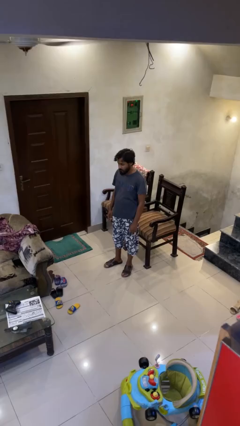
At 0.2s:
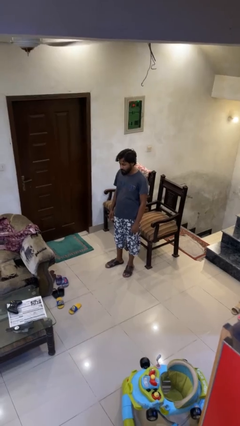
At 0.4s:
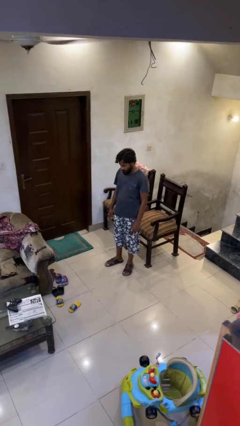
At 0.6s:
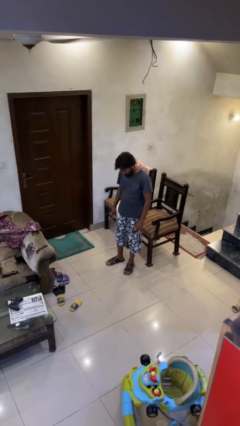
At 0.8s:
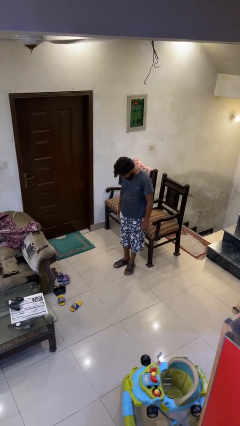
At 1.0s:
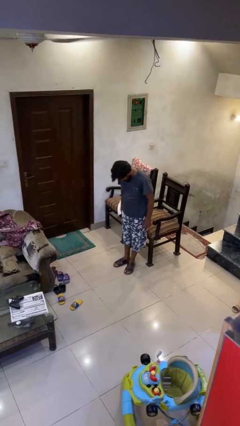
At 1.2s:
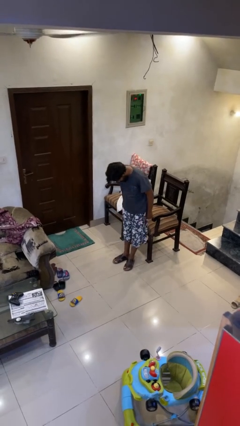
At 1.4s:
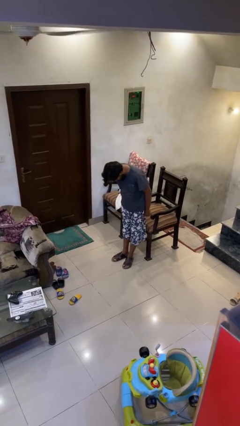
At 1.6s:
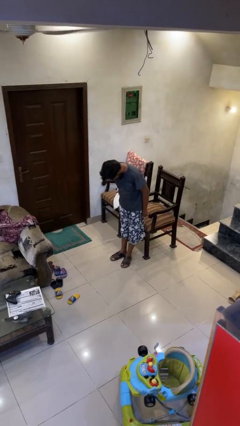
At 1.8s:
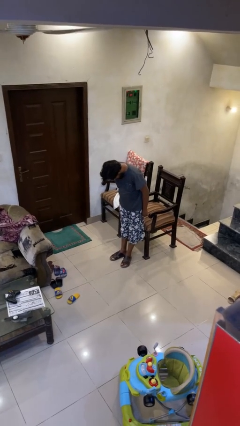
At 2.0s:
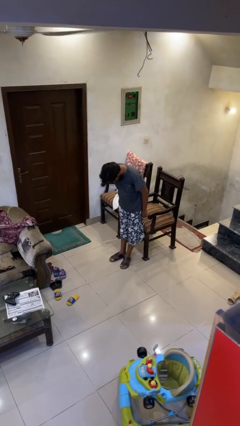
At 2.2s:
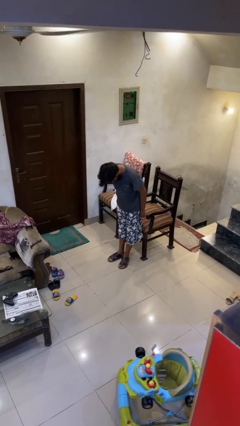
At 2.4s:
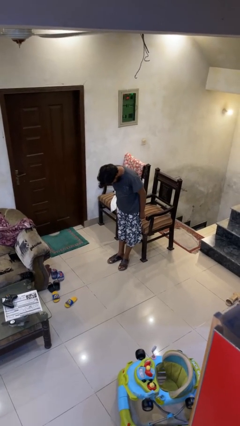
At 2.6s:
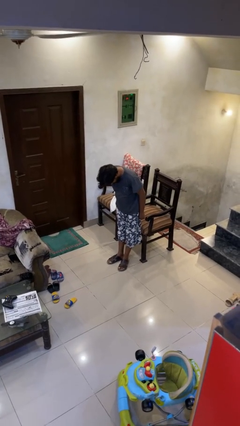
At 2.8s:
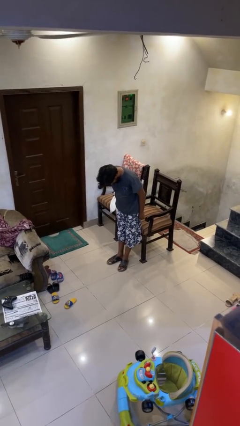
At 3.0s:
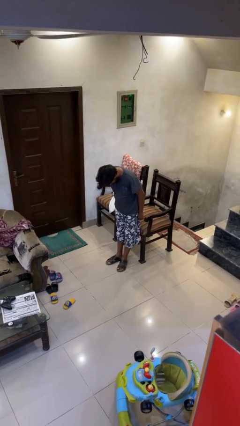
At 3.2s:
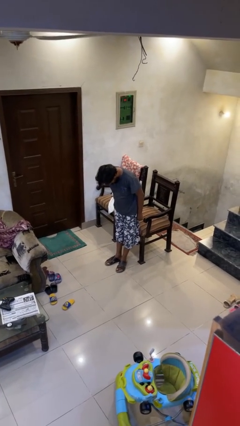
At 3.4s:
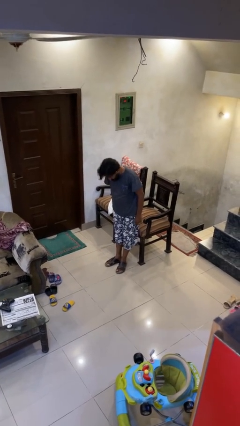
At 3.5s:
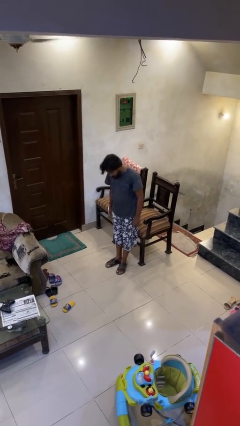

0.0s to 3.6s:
person bows

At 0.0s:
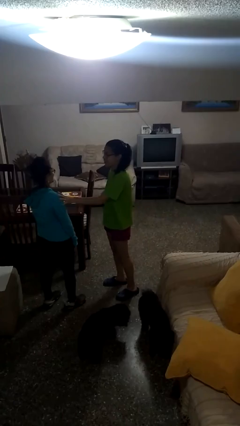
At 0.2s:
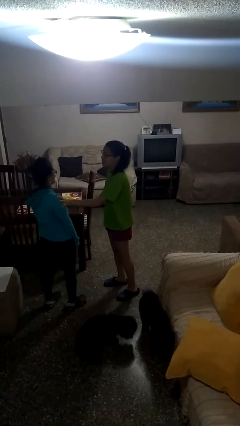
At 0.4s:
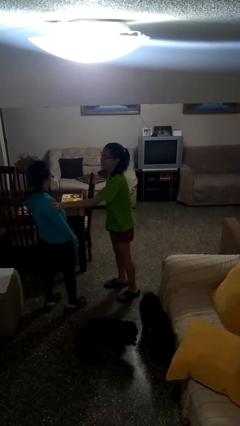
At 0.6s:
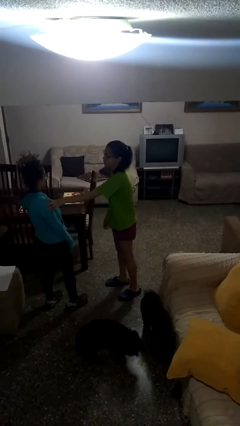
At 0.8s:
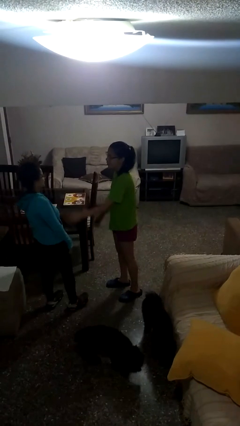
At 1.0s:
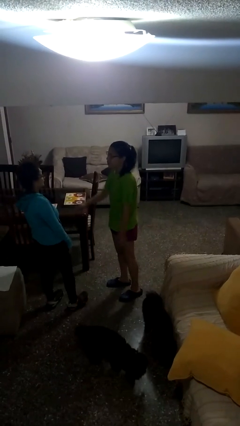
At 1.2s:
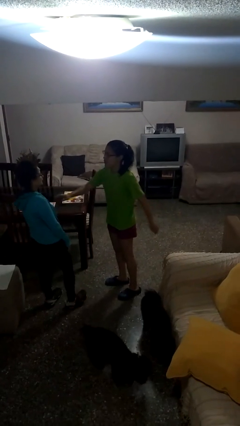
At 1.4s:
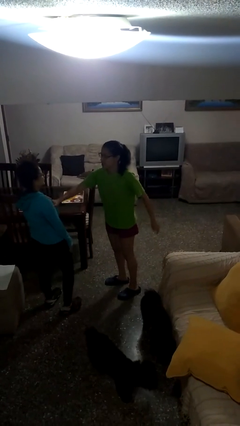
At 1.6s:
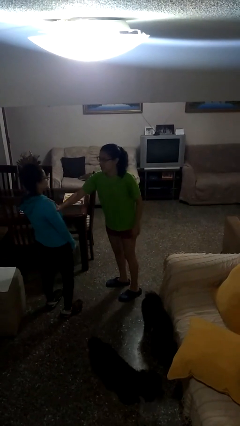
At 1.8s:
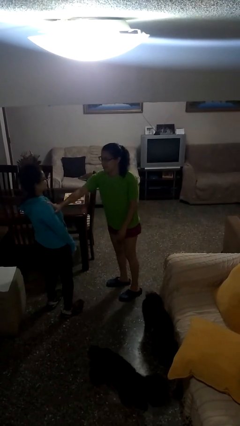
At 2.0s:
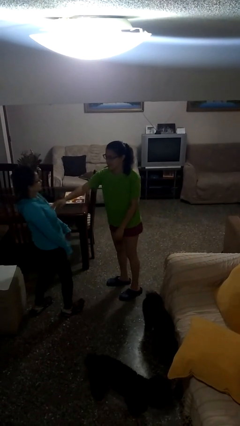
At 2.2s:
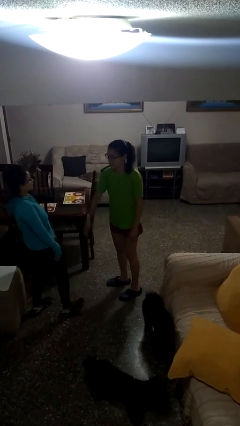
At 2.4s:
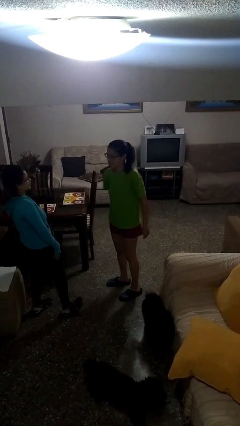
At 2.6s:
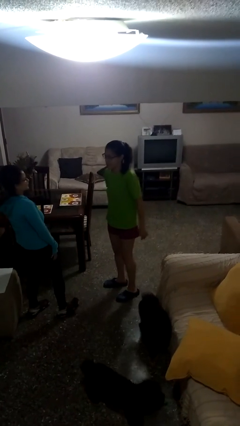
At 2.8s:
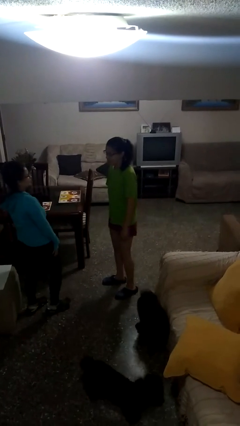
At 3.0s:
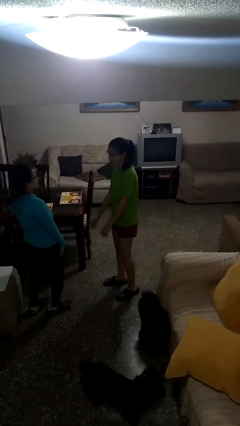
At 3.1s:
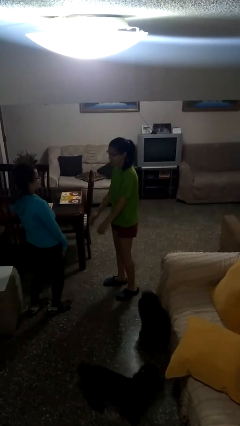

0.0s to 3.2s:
person shoves person

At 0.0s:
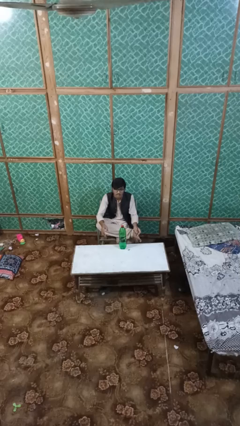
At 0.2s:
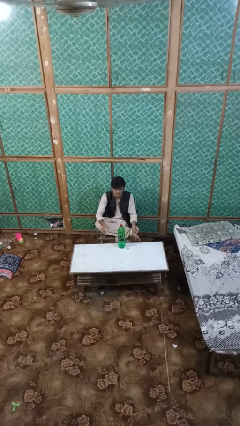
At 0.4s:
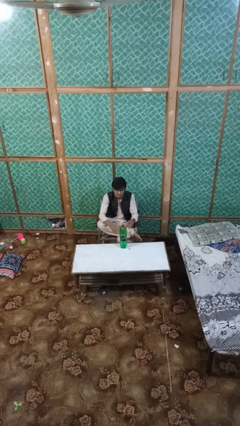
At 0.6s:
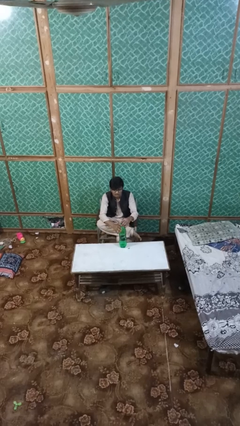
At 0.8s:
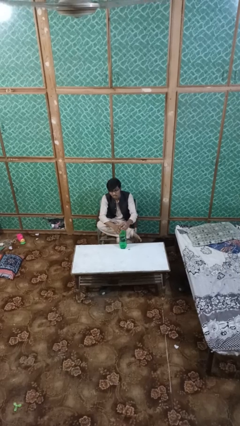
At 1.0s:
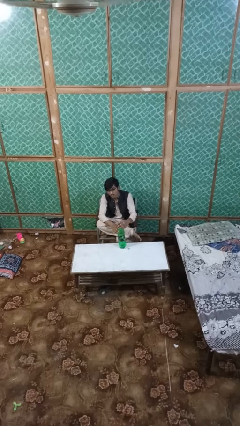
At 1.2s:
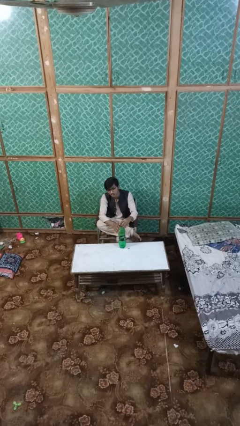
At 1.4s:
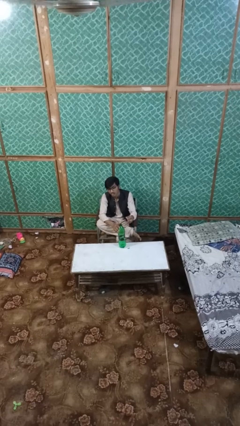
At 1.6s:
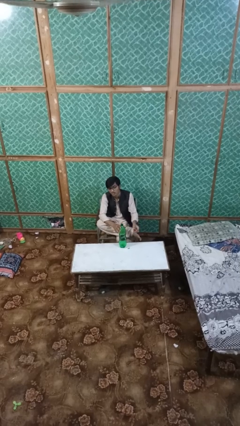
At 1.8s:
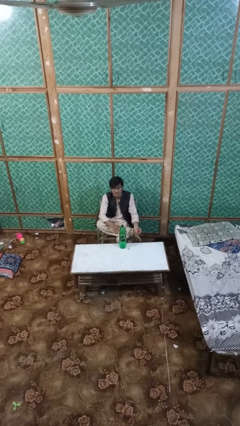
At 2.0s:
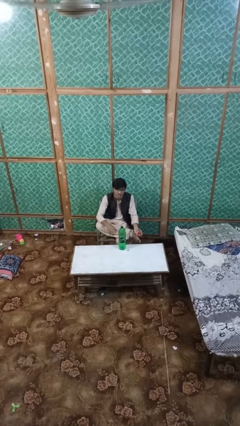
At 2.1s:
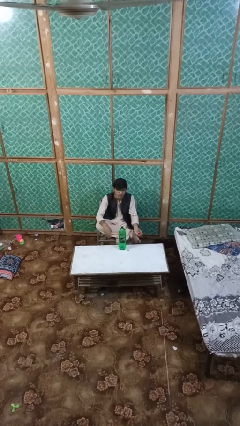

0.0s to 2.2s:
person unscrews lid from bottle

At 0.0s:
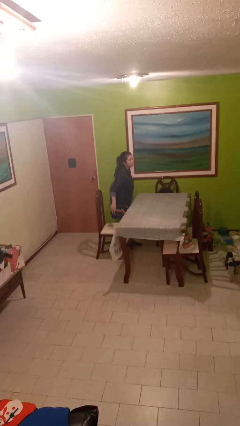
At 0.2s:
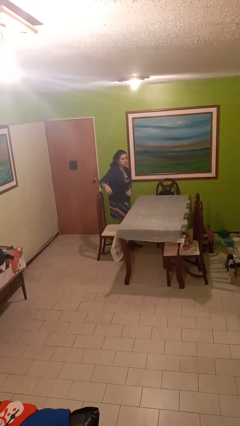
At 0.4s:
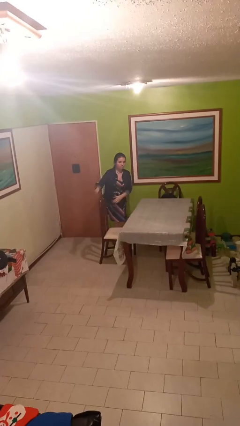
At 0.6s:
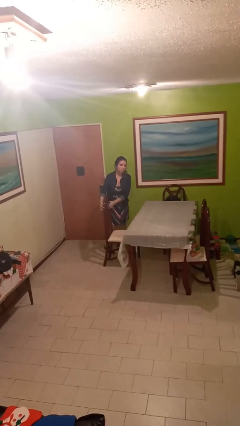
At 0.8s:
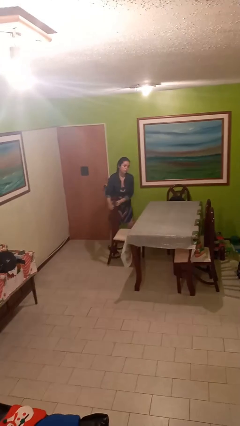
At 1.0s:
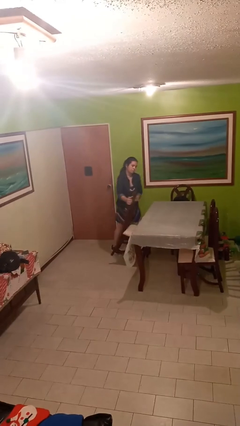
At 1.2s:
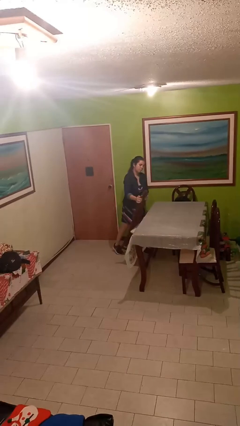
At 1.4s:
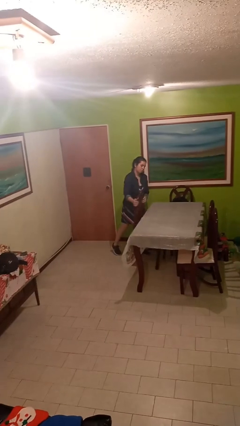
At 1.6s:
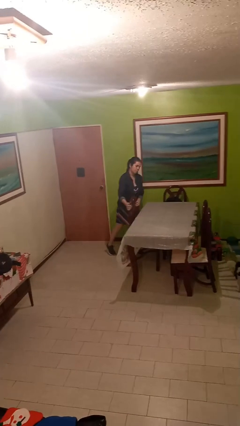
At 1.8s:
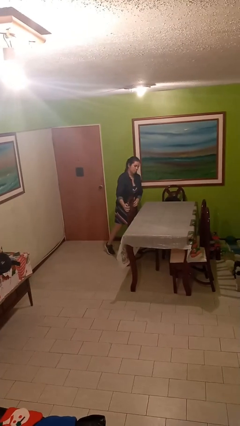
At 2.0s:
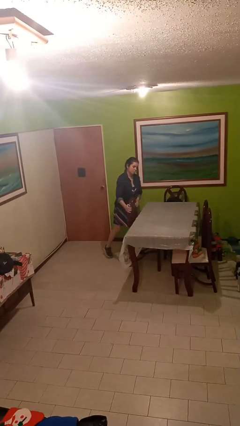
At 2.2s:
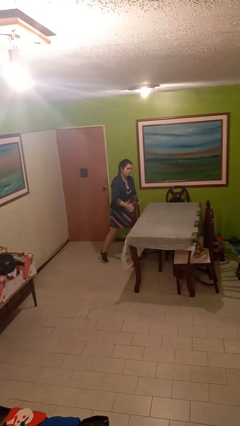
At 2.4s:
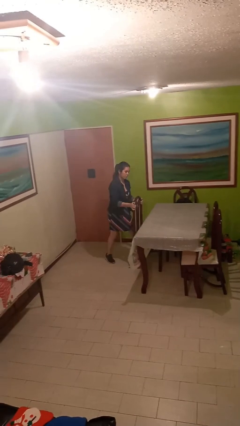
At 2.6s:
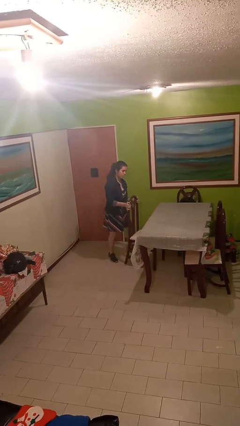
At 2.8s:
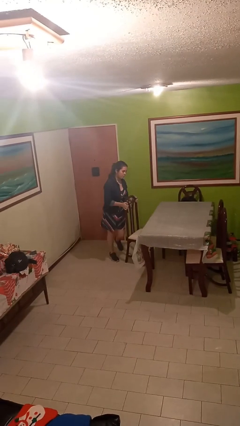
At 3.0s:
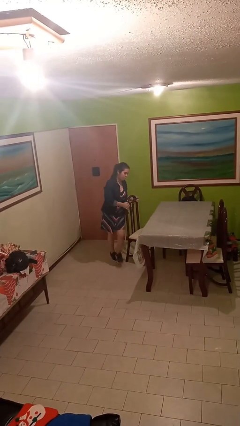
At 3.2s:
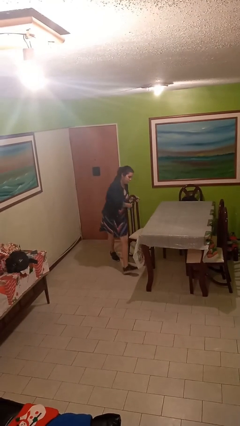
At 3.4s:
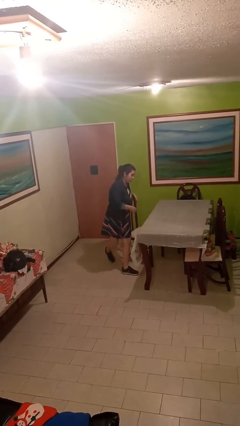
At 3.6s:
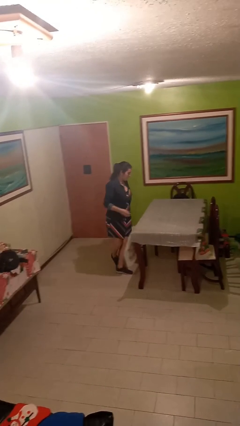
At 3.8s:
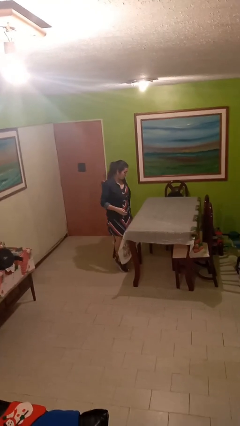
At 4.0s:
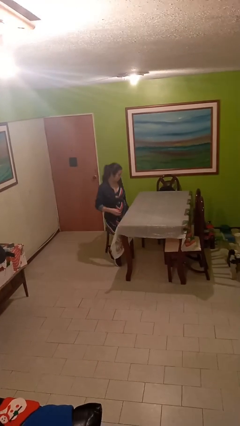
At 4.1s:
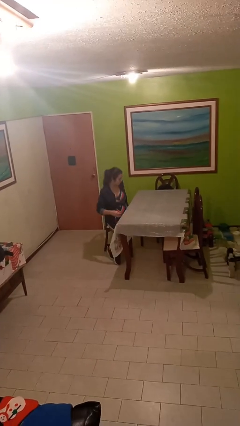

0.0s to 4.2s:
person stands up

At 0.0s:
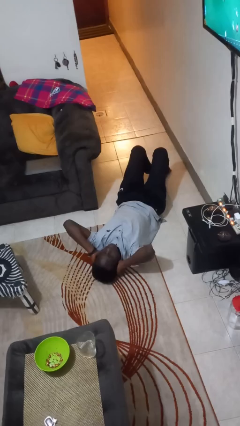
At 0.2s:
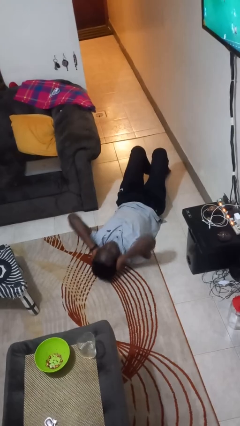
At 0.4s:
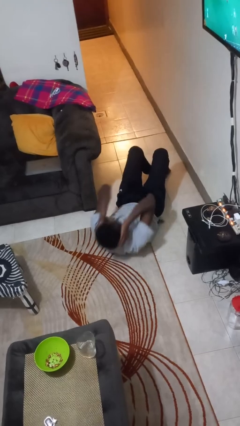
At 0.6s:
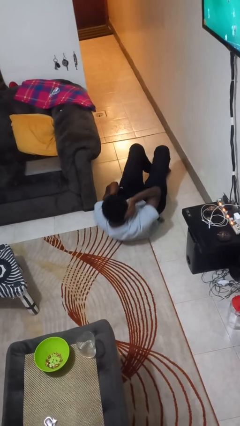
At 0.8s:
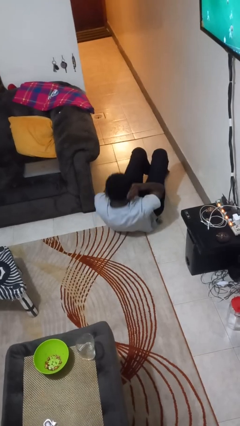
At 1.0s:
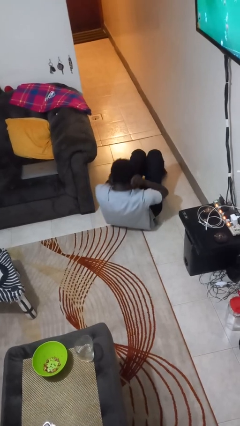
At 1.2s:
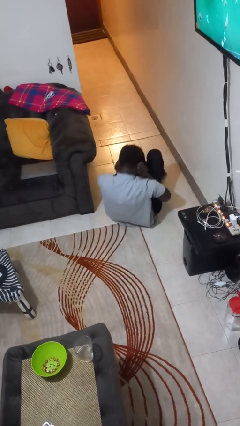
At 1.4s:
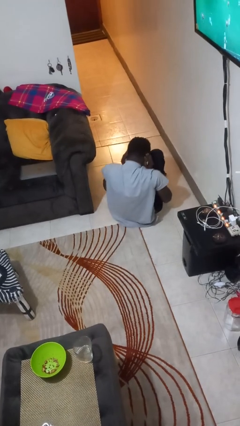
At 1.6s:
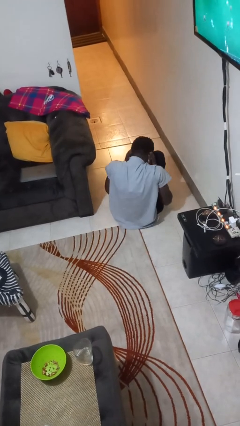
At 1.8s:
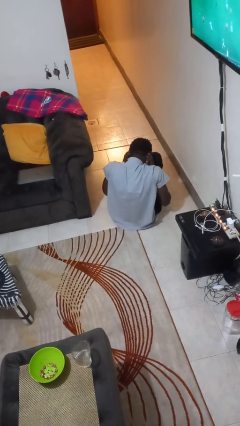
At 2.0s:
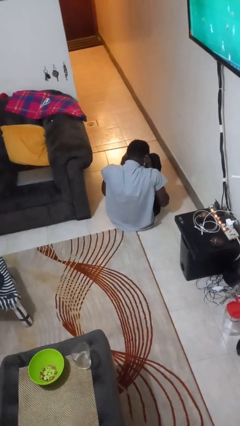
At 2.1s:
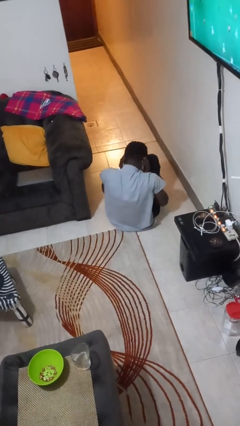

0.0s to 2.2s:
person exercises with situp

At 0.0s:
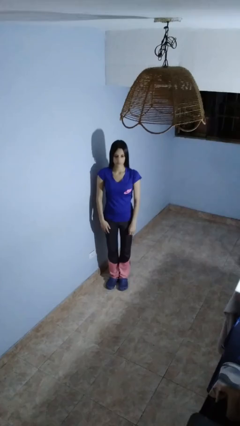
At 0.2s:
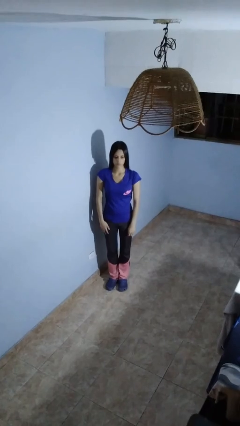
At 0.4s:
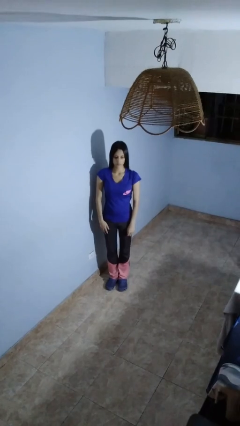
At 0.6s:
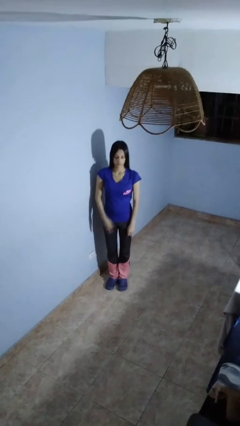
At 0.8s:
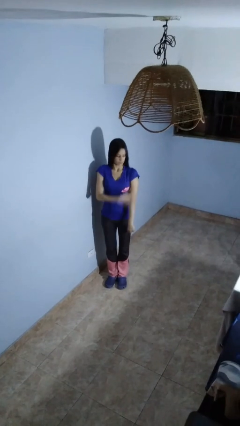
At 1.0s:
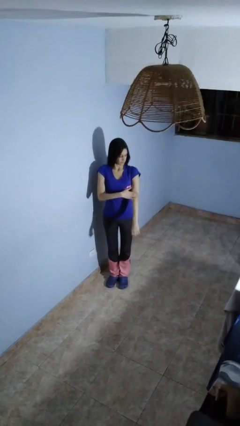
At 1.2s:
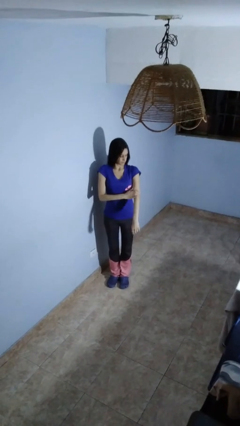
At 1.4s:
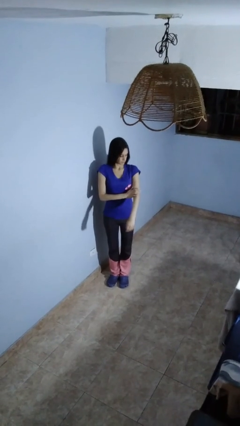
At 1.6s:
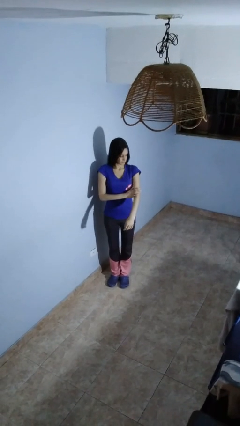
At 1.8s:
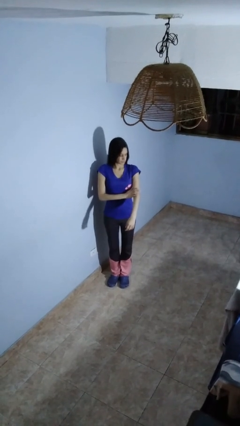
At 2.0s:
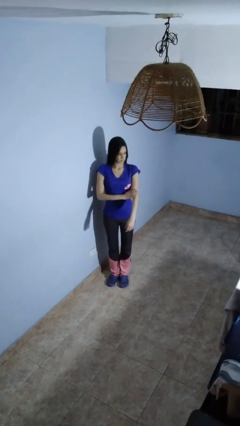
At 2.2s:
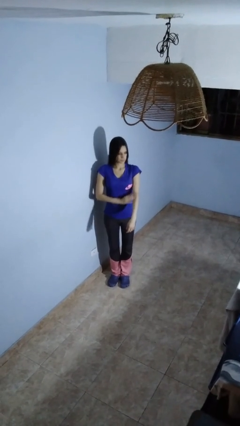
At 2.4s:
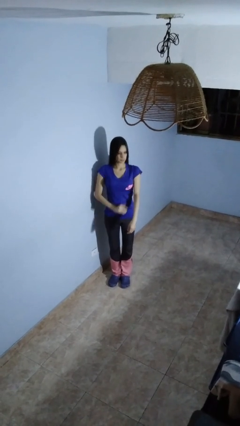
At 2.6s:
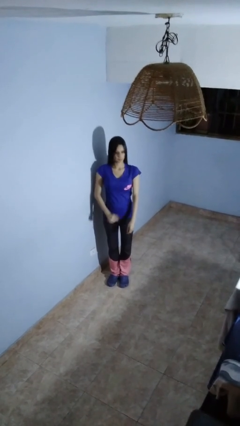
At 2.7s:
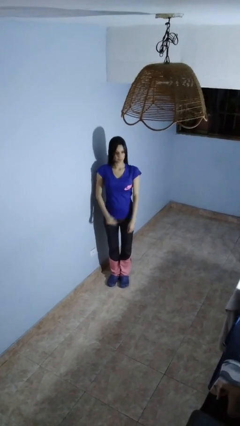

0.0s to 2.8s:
person swats bug
